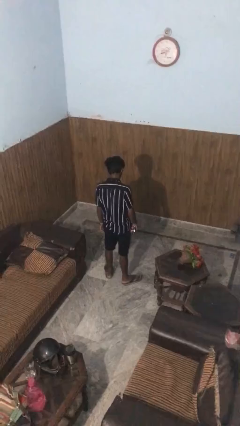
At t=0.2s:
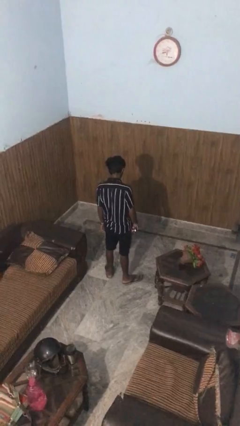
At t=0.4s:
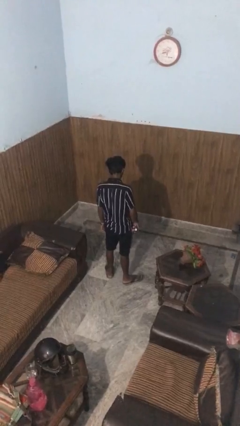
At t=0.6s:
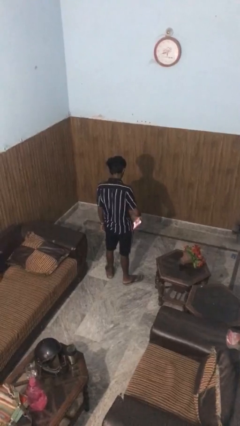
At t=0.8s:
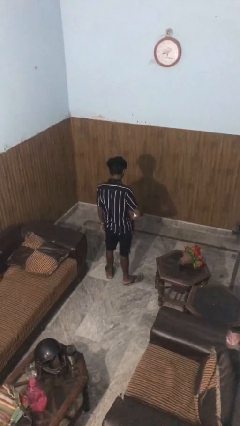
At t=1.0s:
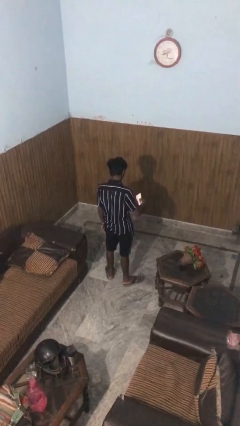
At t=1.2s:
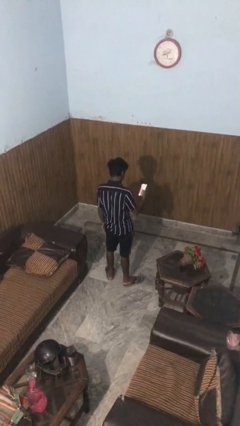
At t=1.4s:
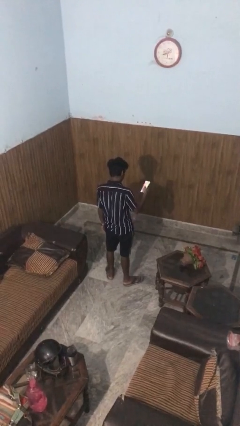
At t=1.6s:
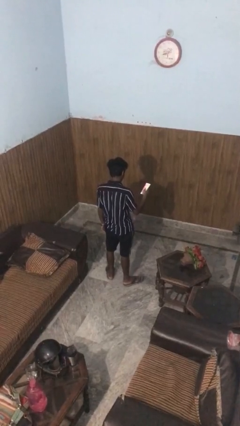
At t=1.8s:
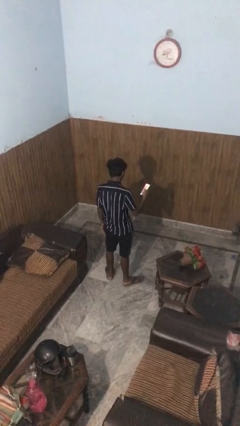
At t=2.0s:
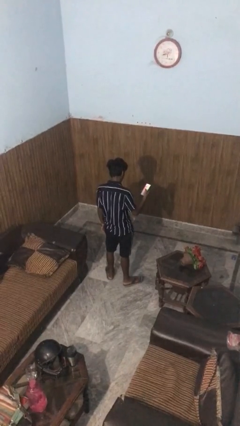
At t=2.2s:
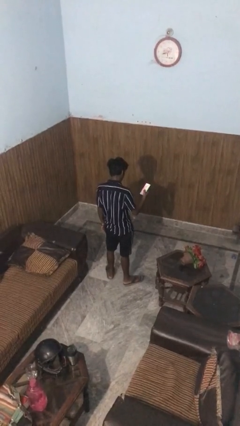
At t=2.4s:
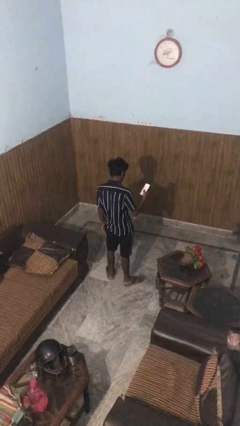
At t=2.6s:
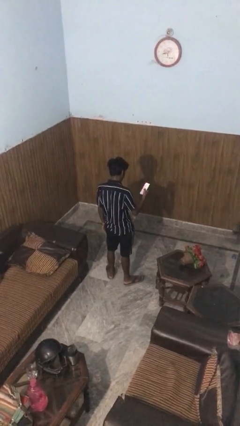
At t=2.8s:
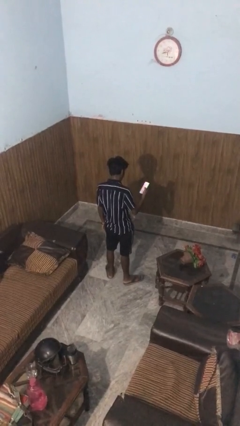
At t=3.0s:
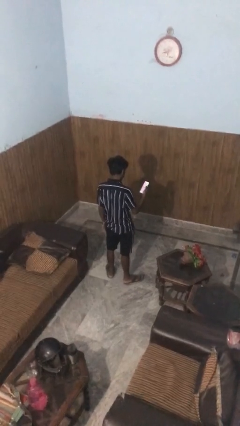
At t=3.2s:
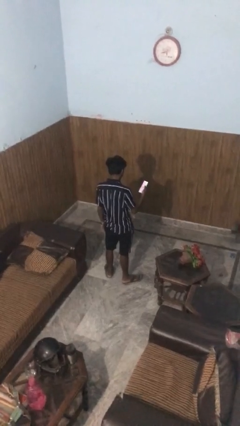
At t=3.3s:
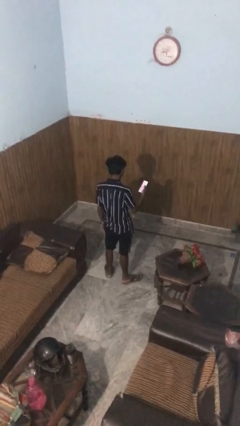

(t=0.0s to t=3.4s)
person takes phone from pocket

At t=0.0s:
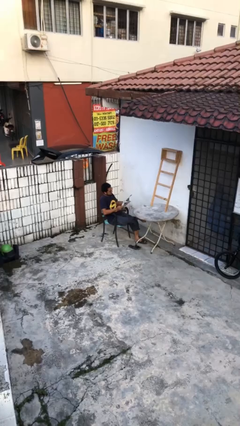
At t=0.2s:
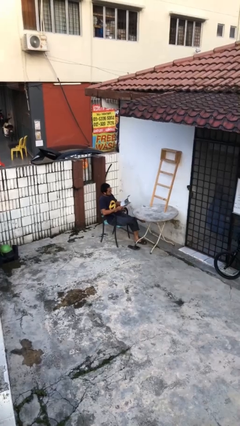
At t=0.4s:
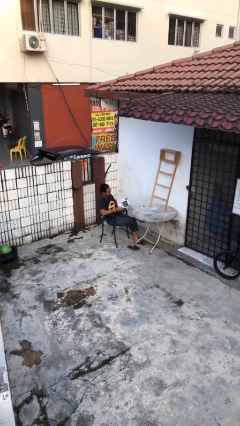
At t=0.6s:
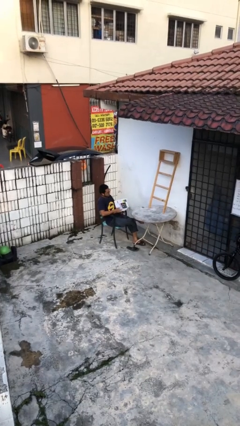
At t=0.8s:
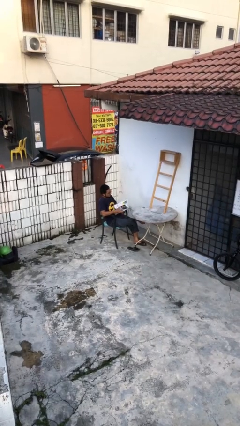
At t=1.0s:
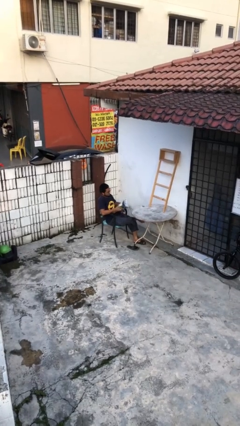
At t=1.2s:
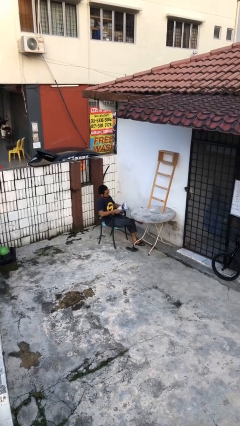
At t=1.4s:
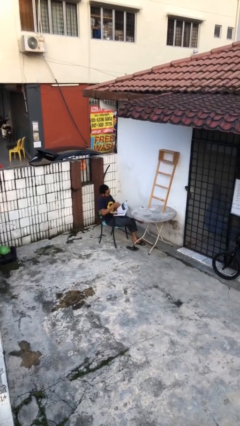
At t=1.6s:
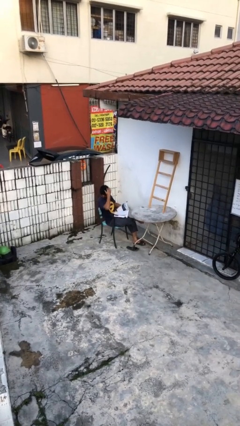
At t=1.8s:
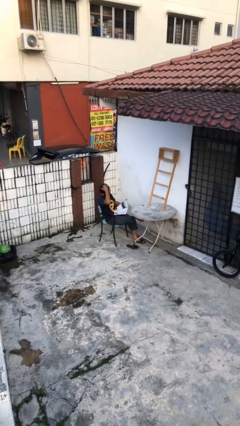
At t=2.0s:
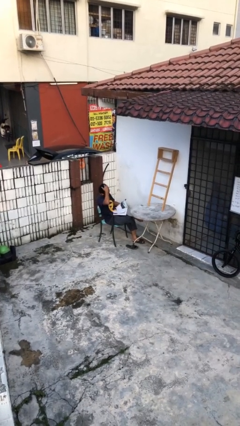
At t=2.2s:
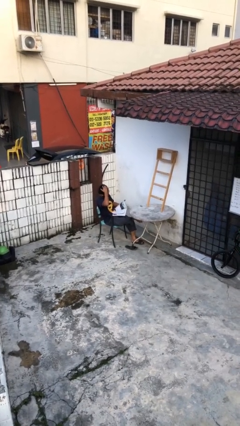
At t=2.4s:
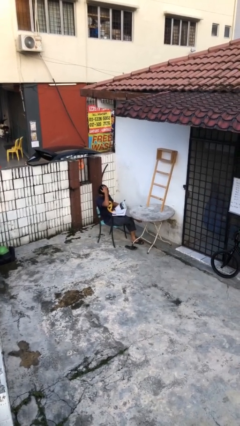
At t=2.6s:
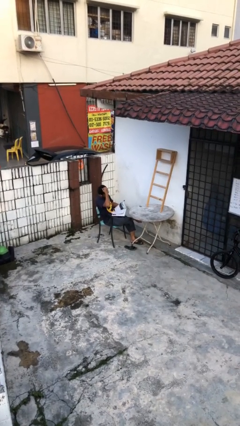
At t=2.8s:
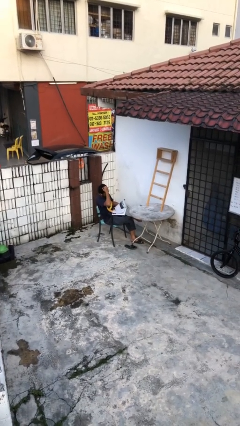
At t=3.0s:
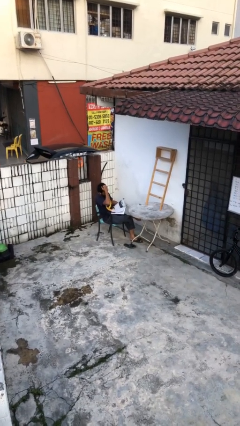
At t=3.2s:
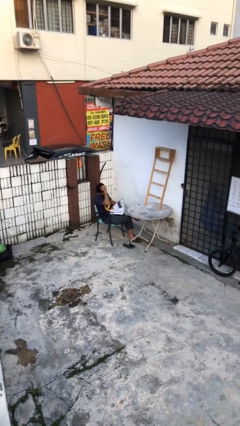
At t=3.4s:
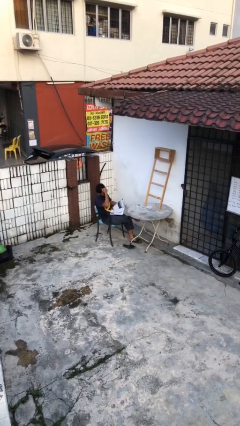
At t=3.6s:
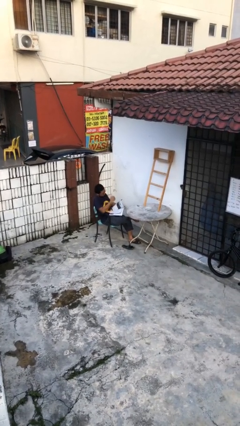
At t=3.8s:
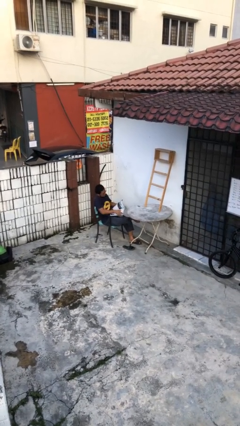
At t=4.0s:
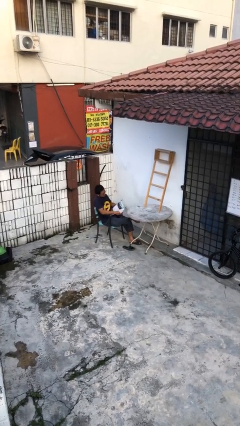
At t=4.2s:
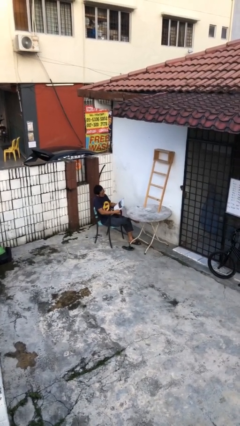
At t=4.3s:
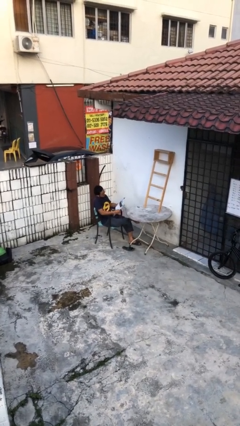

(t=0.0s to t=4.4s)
person reads document

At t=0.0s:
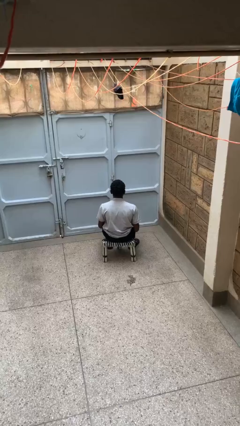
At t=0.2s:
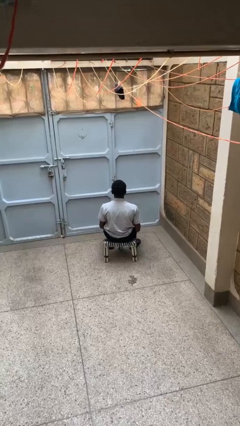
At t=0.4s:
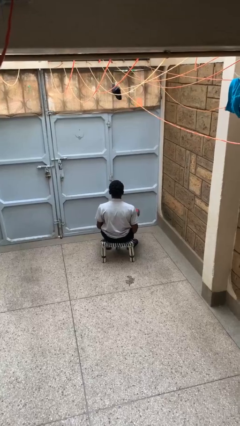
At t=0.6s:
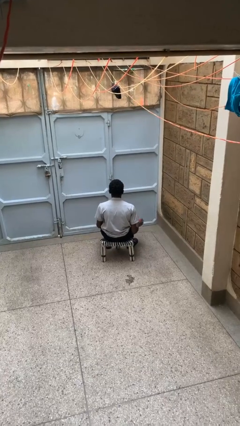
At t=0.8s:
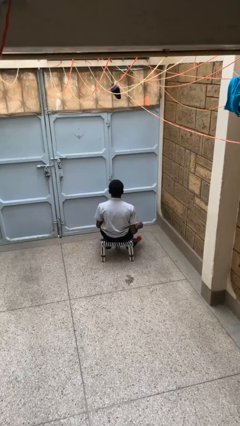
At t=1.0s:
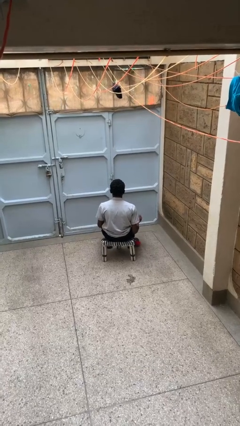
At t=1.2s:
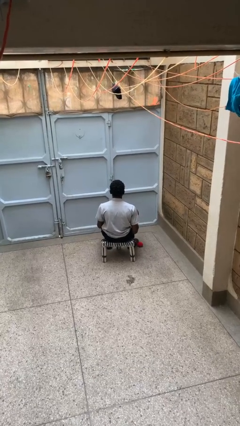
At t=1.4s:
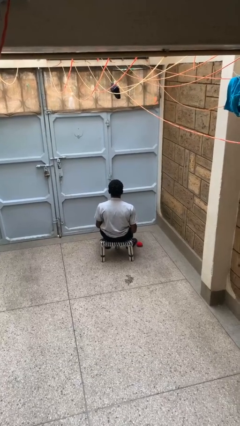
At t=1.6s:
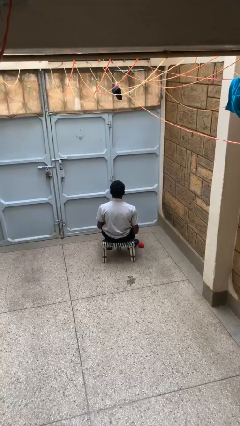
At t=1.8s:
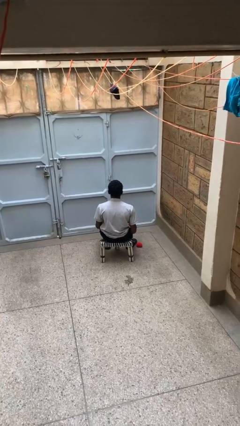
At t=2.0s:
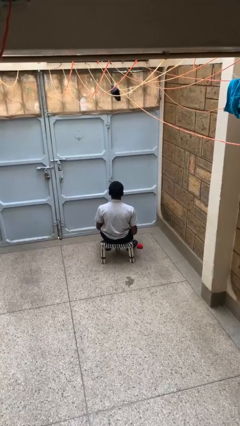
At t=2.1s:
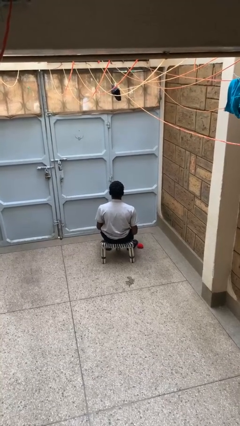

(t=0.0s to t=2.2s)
person drops object

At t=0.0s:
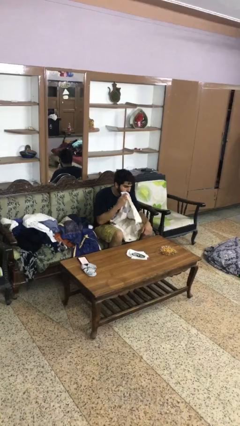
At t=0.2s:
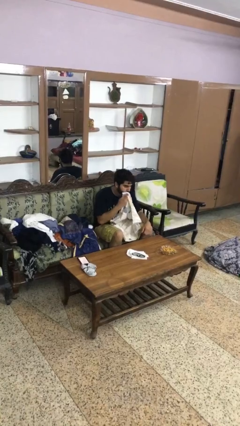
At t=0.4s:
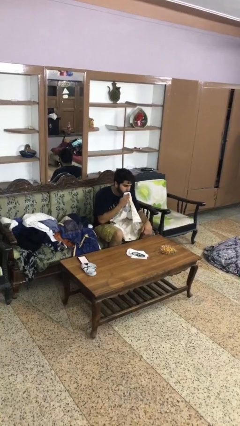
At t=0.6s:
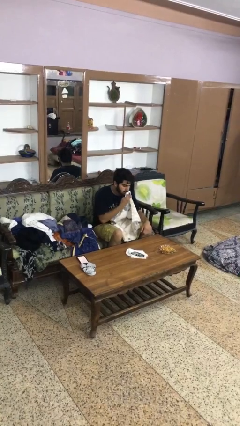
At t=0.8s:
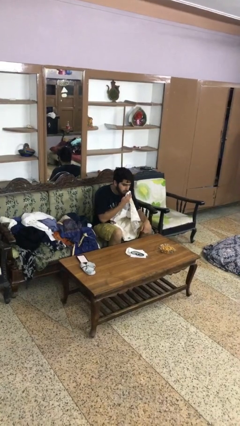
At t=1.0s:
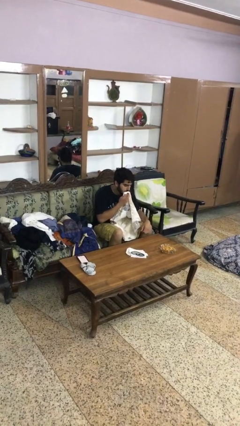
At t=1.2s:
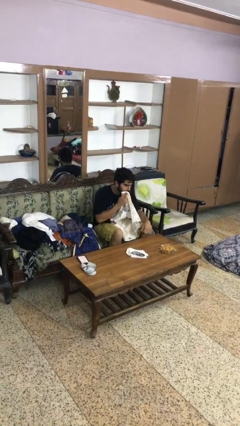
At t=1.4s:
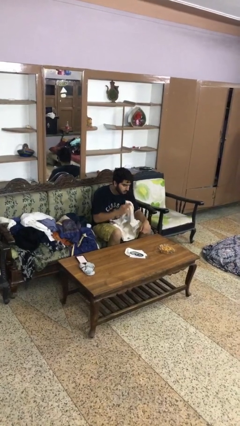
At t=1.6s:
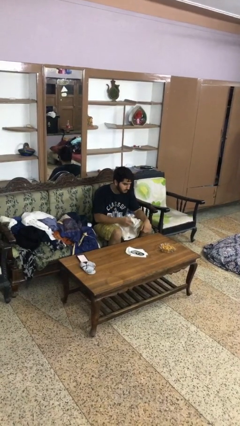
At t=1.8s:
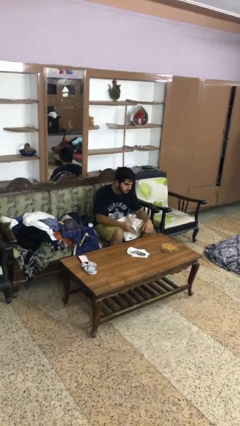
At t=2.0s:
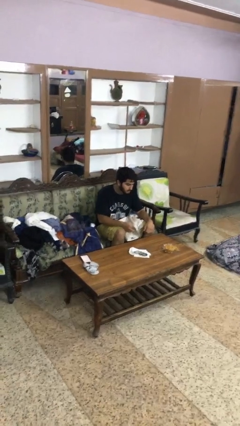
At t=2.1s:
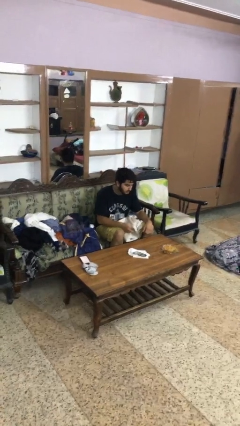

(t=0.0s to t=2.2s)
person wipes mouth with napkin

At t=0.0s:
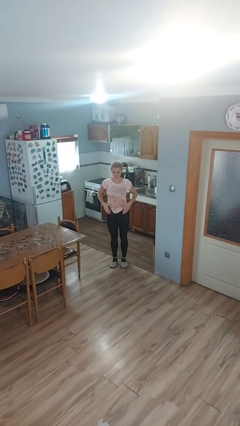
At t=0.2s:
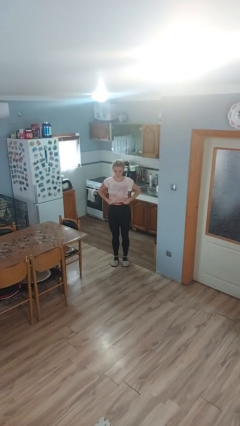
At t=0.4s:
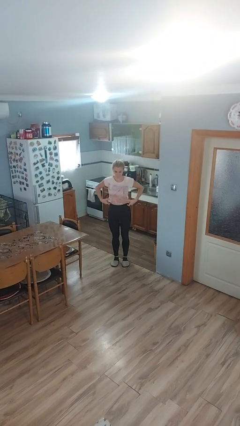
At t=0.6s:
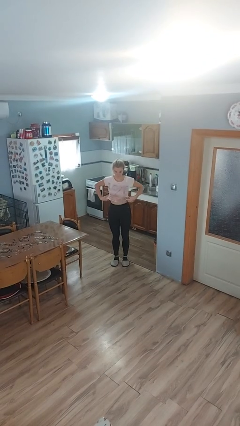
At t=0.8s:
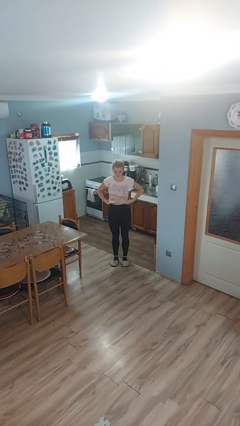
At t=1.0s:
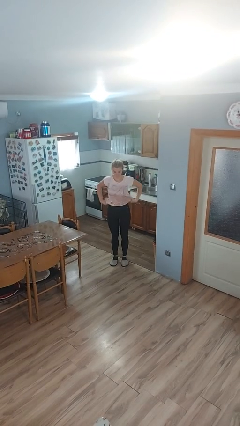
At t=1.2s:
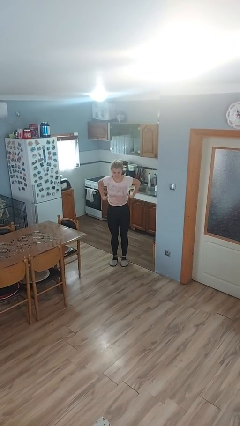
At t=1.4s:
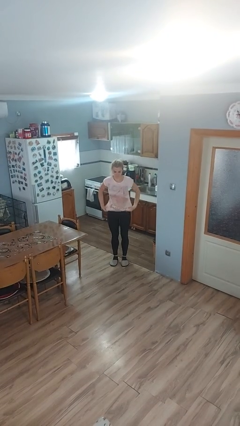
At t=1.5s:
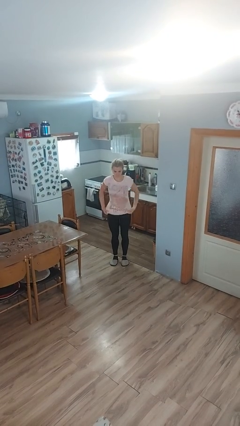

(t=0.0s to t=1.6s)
person untucks shirt

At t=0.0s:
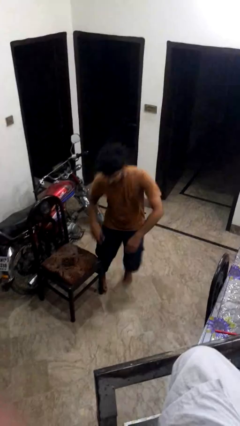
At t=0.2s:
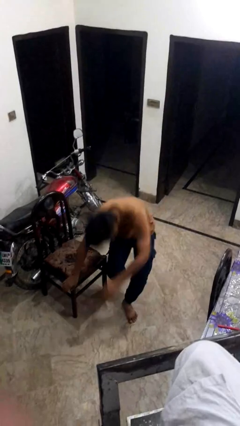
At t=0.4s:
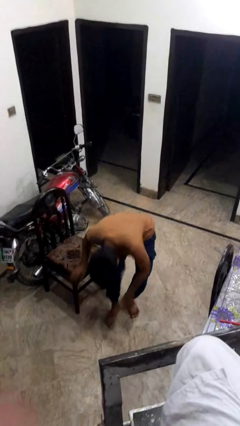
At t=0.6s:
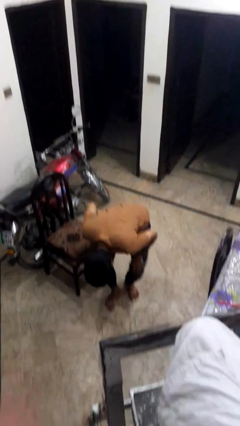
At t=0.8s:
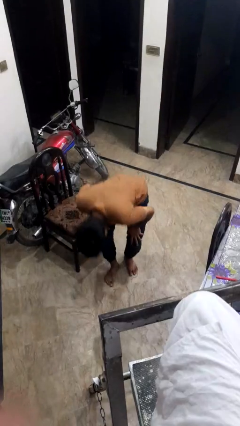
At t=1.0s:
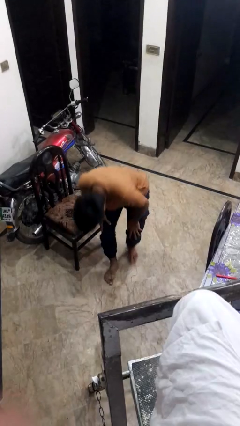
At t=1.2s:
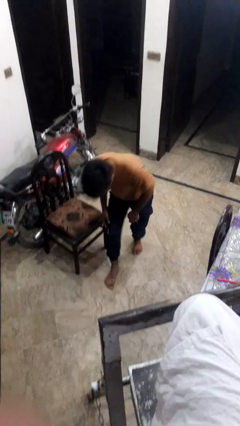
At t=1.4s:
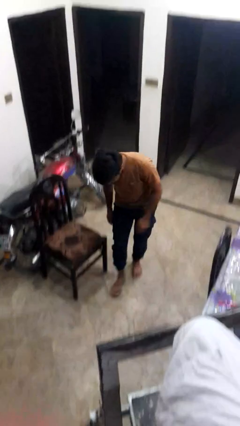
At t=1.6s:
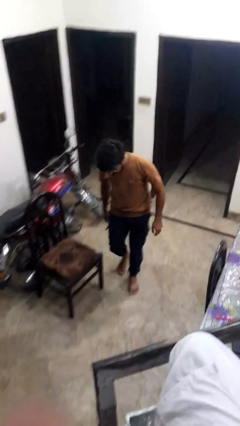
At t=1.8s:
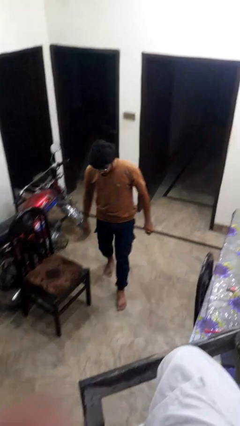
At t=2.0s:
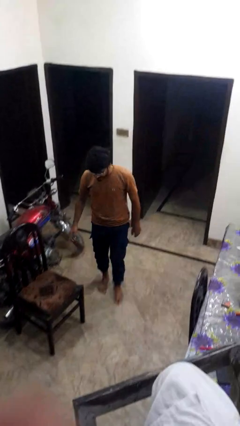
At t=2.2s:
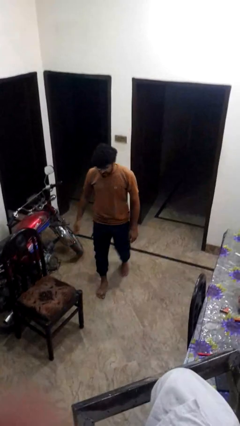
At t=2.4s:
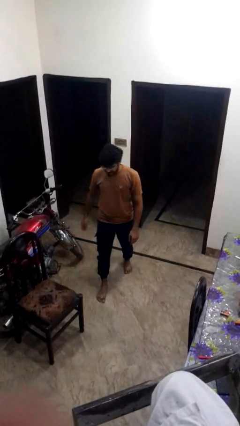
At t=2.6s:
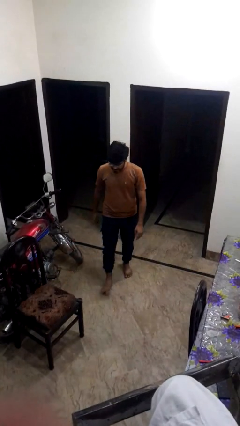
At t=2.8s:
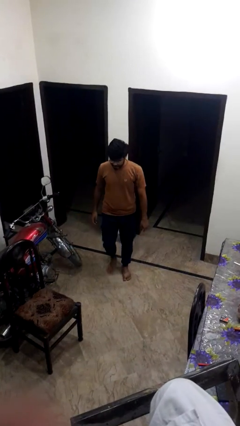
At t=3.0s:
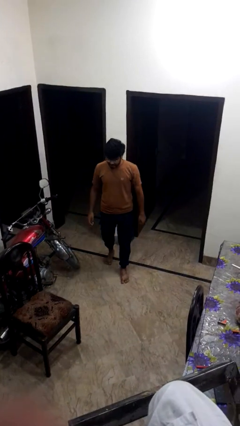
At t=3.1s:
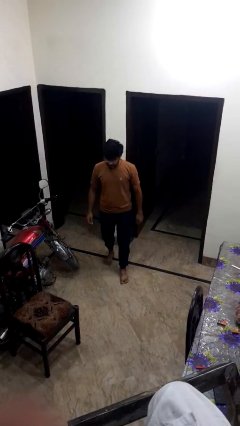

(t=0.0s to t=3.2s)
person stubs toe

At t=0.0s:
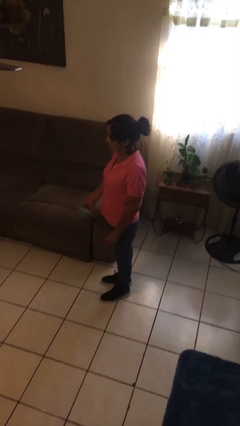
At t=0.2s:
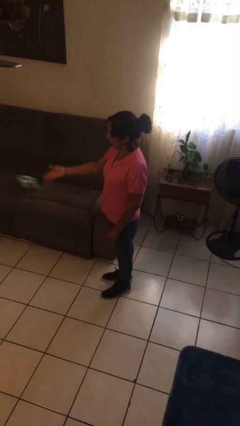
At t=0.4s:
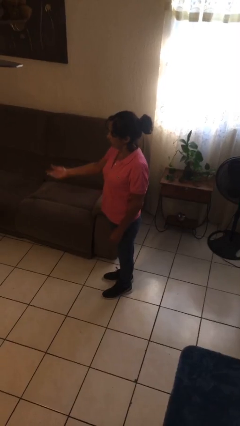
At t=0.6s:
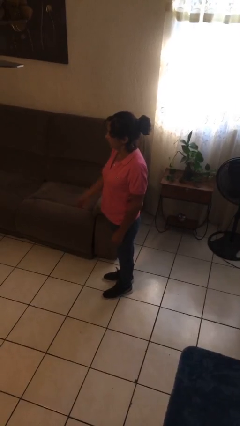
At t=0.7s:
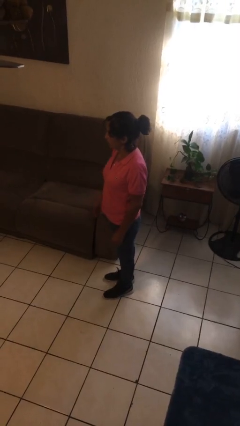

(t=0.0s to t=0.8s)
person throws object on table
